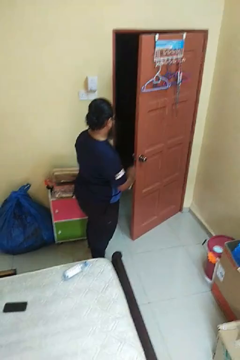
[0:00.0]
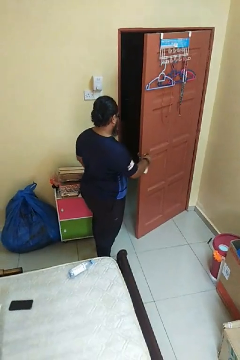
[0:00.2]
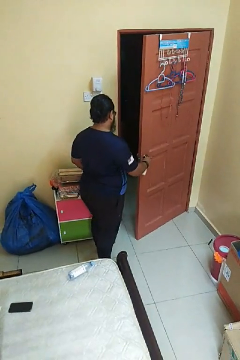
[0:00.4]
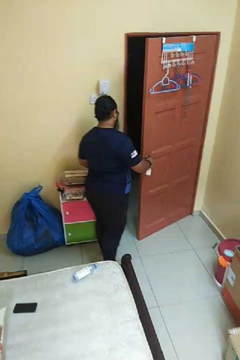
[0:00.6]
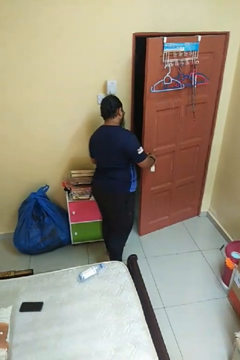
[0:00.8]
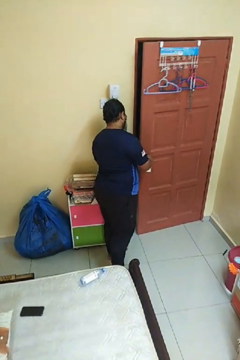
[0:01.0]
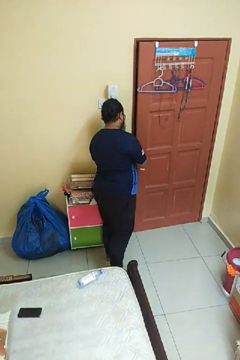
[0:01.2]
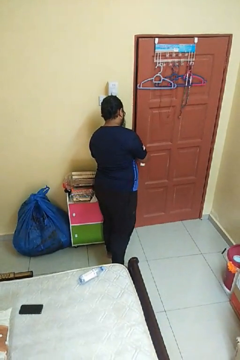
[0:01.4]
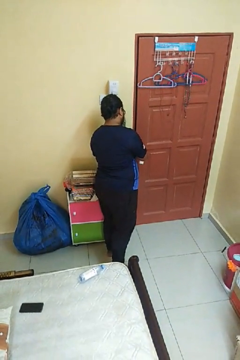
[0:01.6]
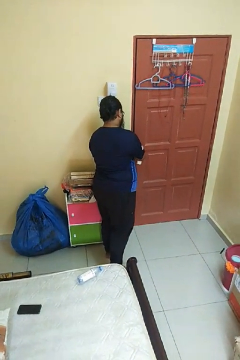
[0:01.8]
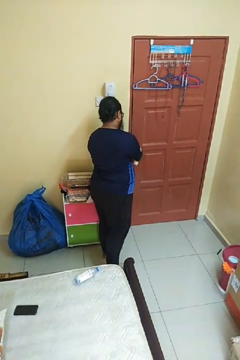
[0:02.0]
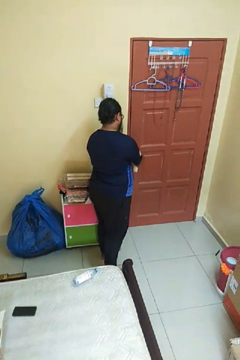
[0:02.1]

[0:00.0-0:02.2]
person closes facility door

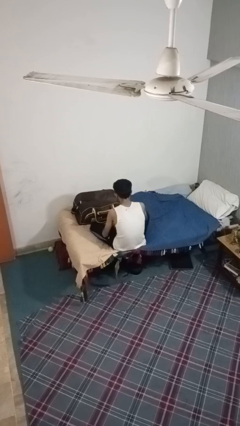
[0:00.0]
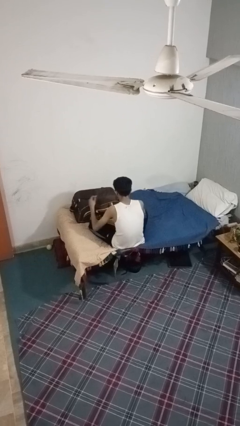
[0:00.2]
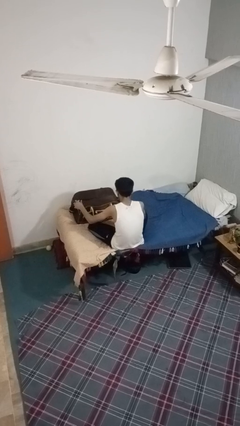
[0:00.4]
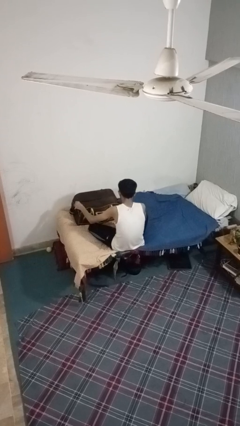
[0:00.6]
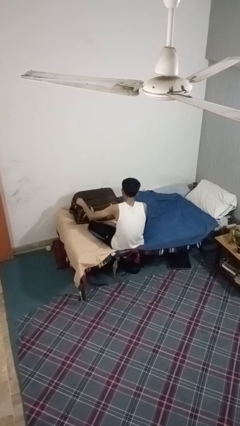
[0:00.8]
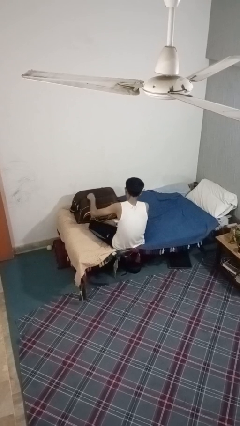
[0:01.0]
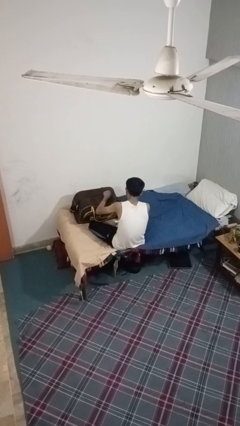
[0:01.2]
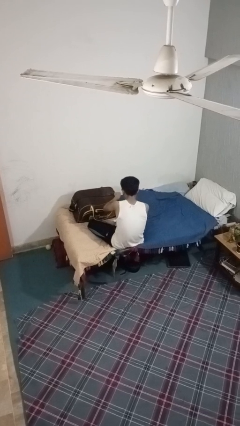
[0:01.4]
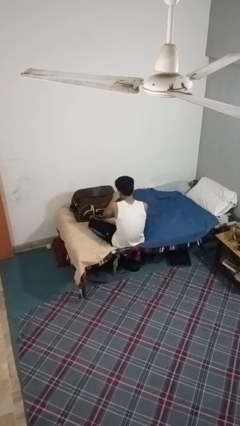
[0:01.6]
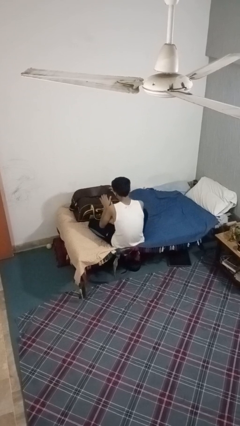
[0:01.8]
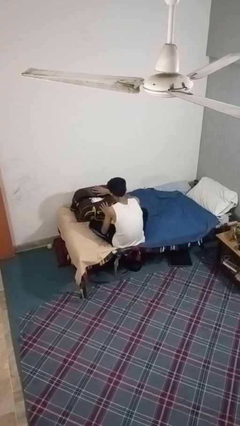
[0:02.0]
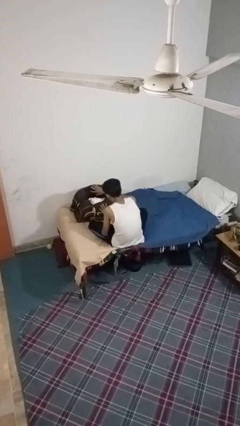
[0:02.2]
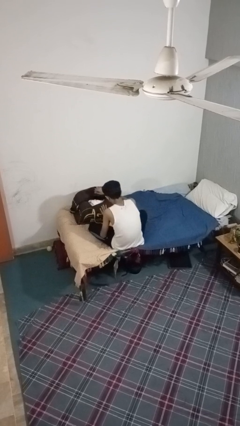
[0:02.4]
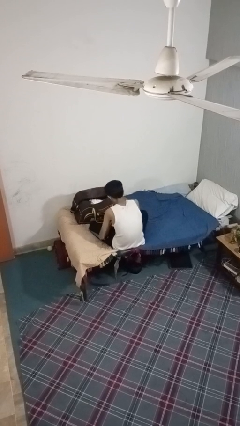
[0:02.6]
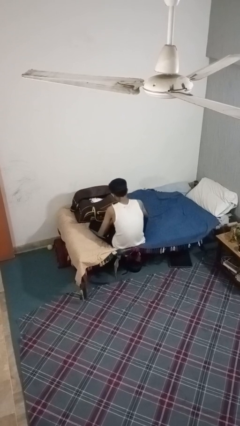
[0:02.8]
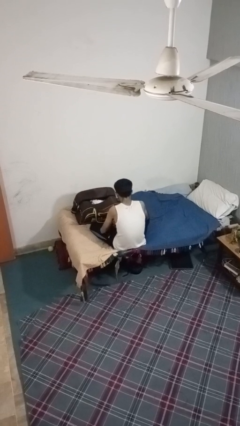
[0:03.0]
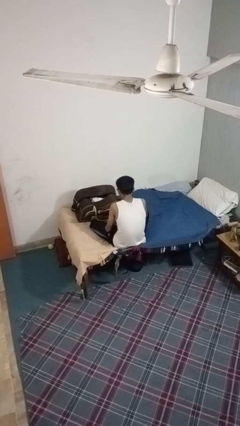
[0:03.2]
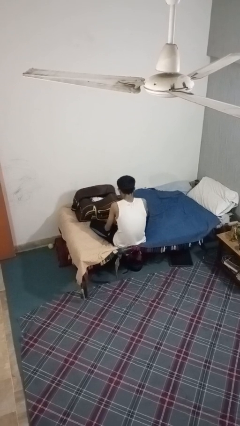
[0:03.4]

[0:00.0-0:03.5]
person opens suitcase

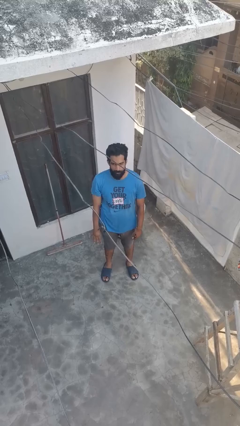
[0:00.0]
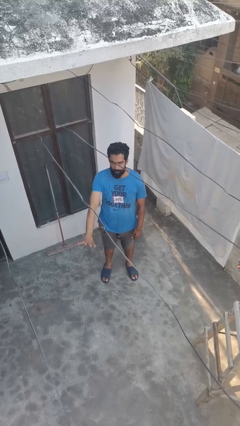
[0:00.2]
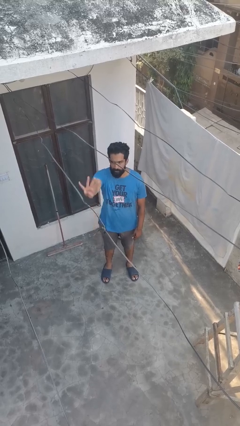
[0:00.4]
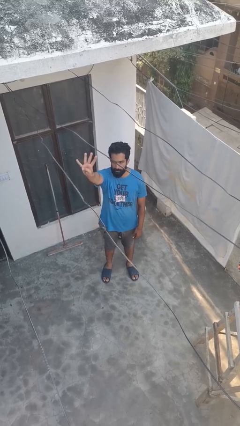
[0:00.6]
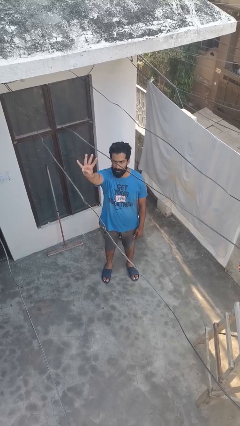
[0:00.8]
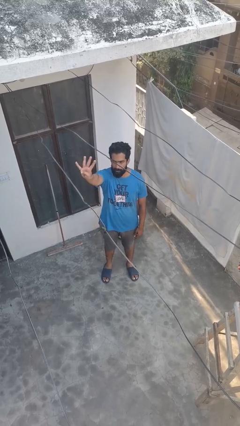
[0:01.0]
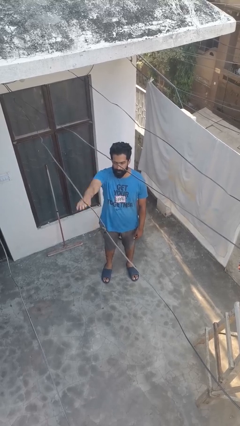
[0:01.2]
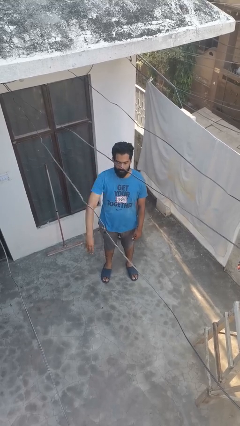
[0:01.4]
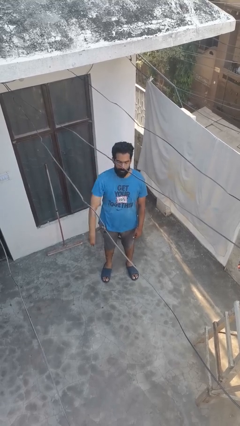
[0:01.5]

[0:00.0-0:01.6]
person gestures number four

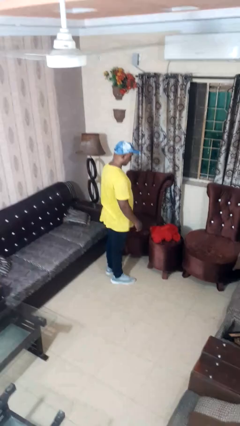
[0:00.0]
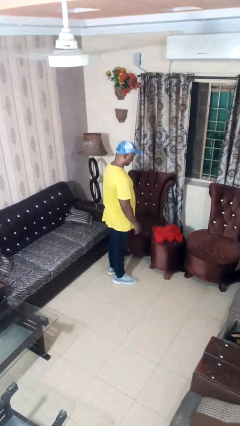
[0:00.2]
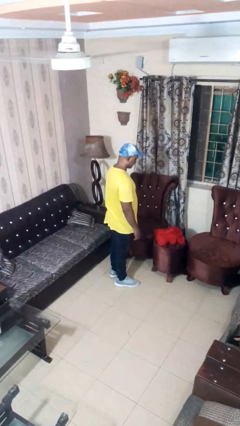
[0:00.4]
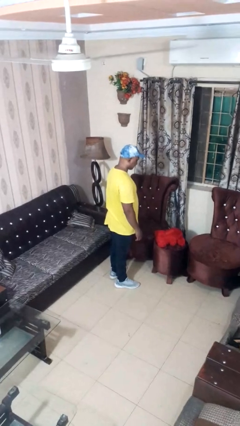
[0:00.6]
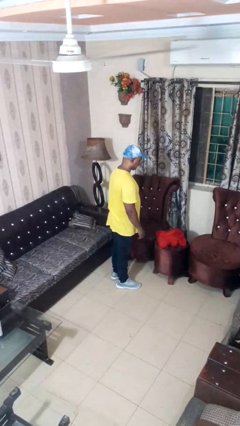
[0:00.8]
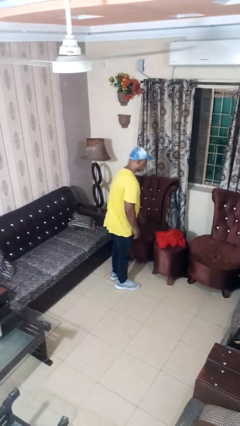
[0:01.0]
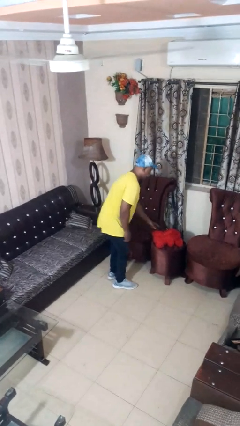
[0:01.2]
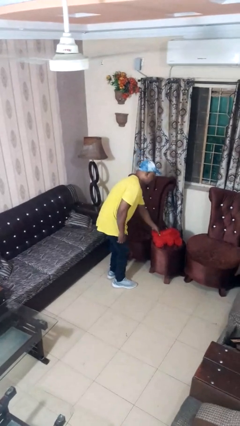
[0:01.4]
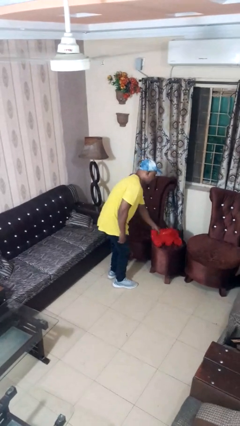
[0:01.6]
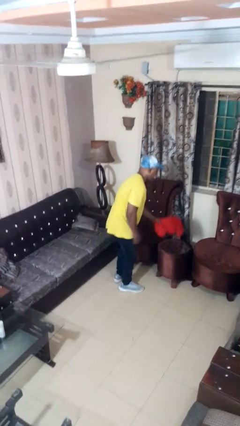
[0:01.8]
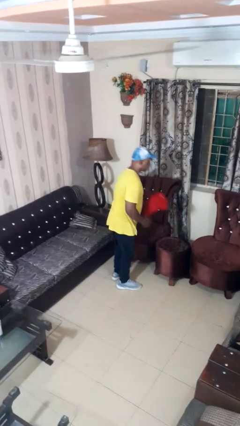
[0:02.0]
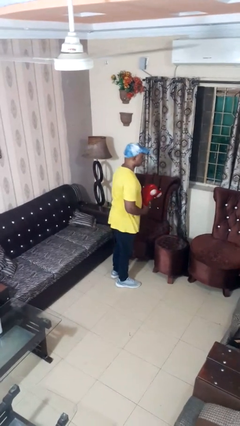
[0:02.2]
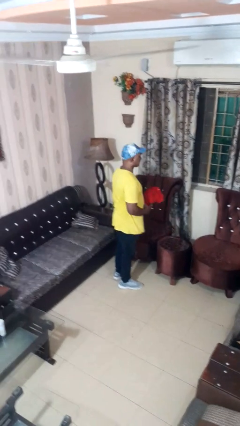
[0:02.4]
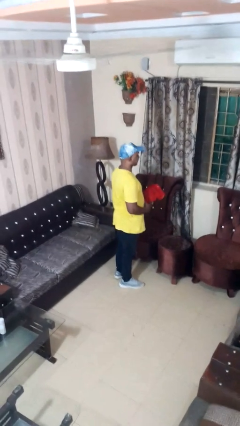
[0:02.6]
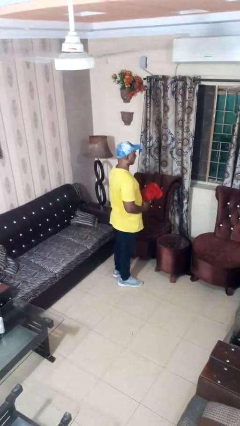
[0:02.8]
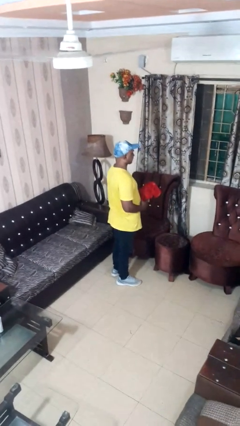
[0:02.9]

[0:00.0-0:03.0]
person picks up object from table

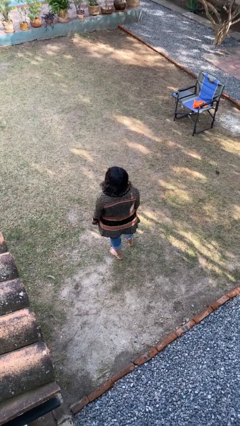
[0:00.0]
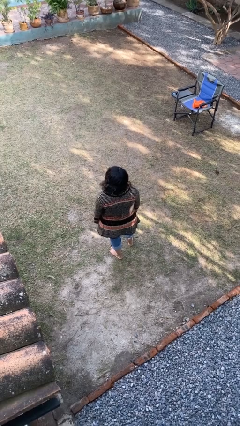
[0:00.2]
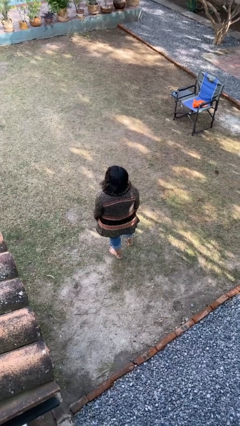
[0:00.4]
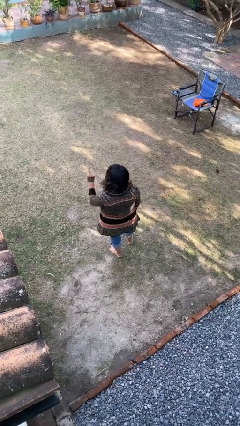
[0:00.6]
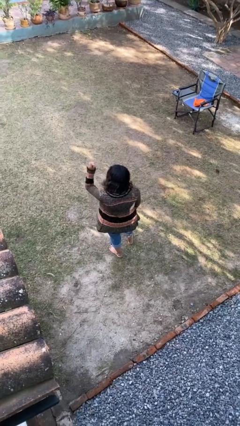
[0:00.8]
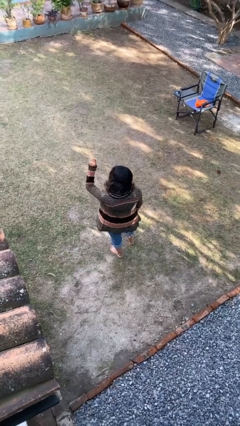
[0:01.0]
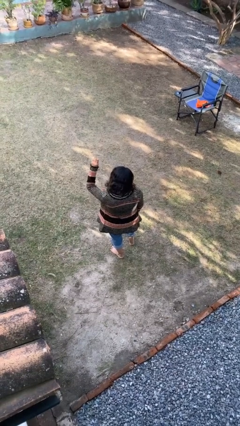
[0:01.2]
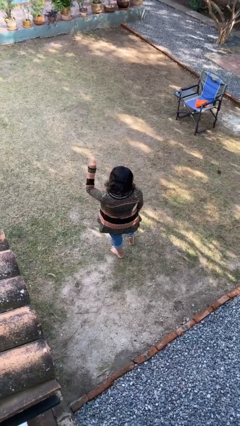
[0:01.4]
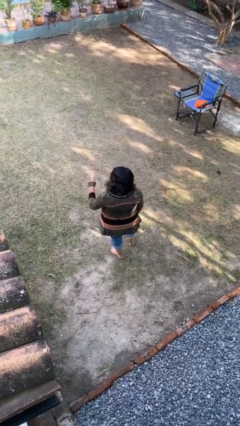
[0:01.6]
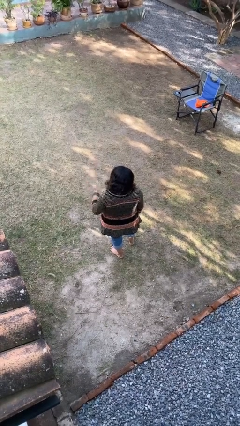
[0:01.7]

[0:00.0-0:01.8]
person gestures number one

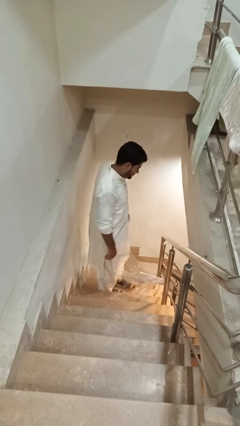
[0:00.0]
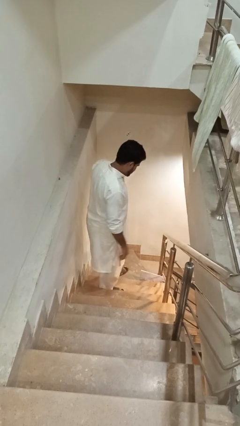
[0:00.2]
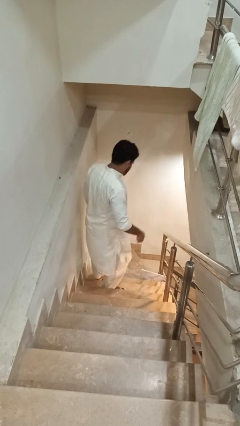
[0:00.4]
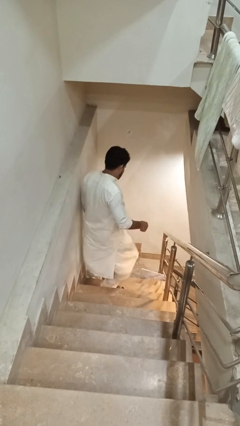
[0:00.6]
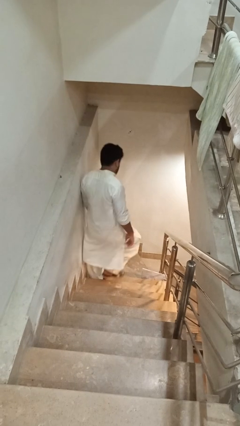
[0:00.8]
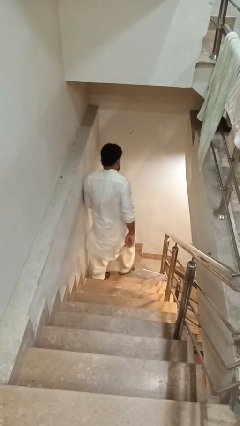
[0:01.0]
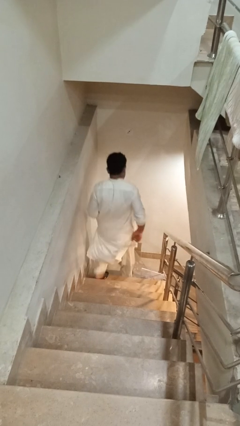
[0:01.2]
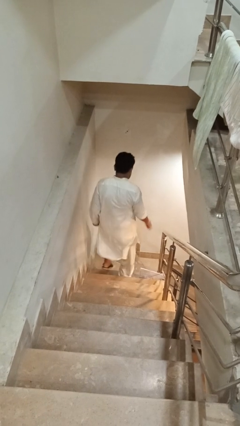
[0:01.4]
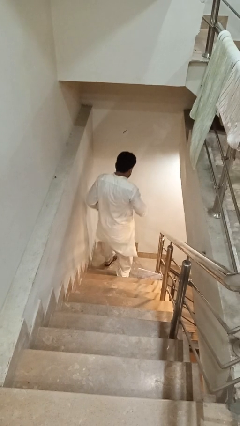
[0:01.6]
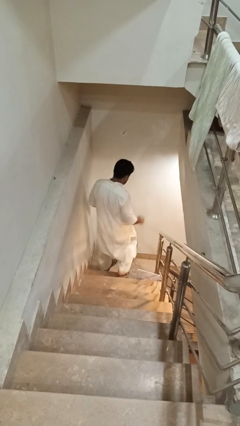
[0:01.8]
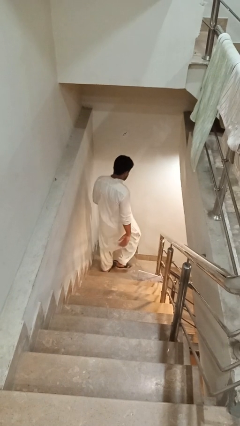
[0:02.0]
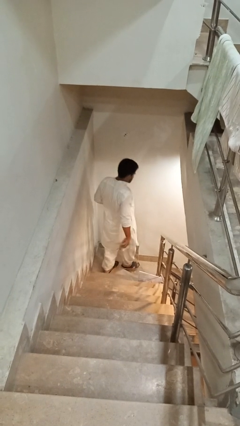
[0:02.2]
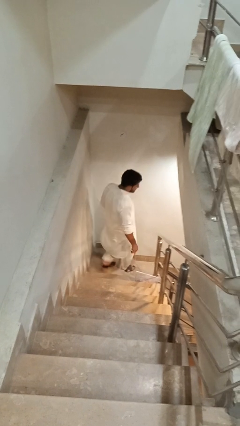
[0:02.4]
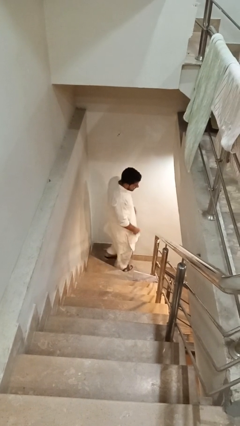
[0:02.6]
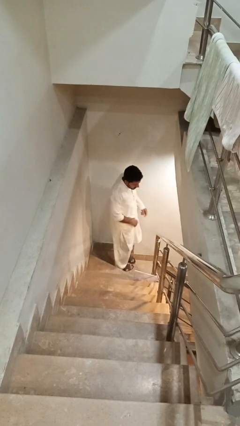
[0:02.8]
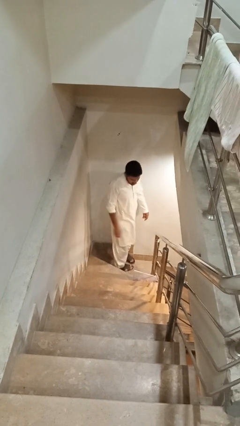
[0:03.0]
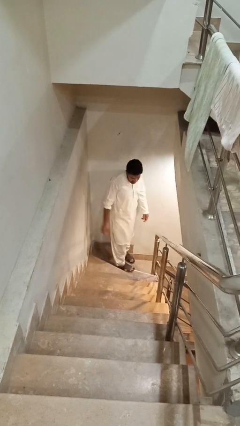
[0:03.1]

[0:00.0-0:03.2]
person climbs down stairs

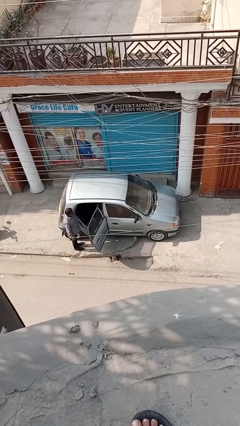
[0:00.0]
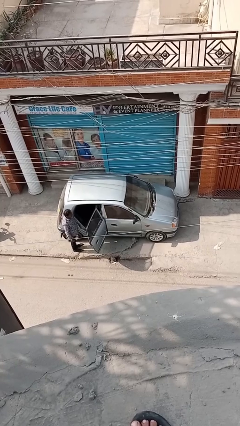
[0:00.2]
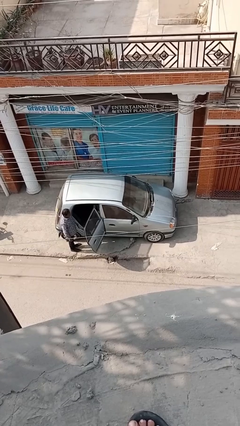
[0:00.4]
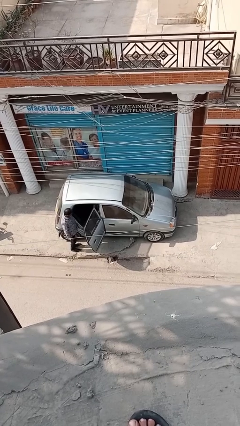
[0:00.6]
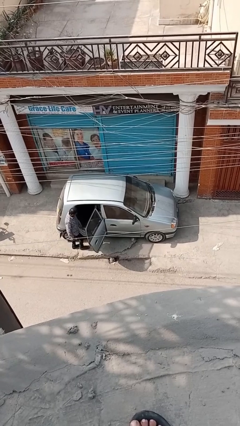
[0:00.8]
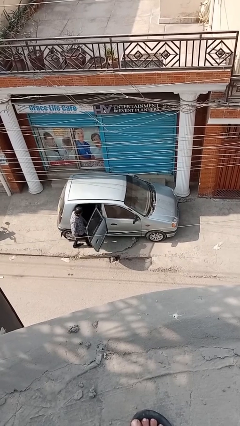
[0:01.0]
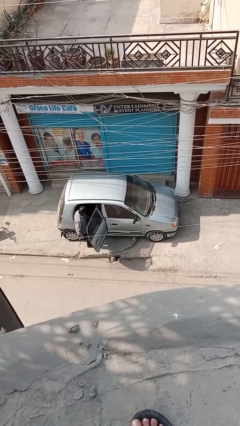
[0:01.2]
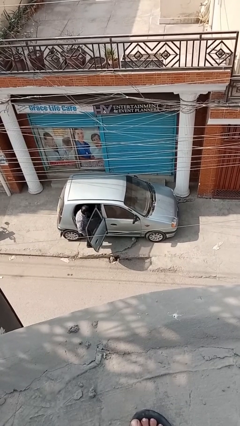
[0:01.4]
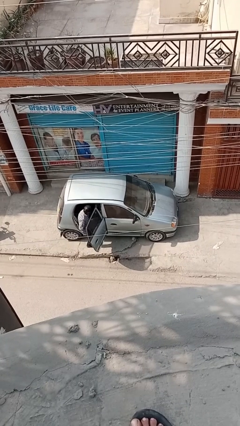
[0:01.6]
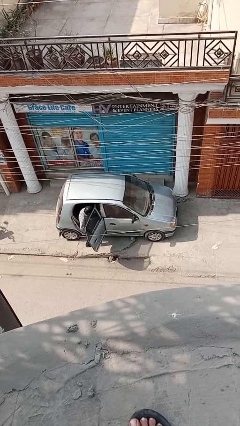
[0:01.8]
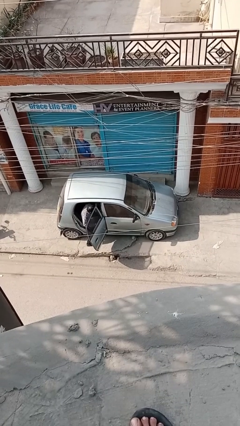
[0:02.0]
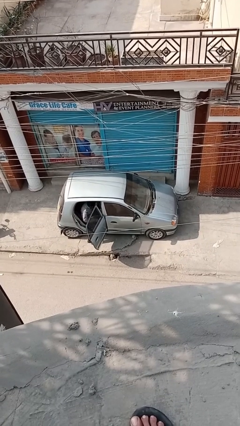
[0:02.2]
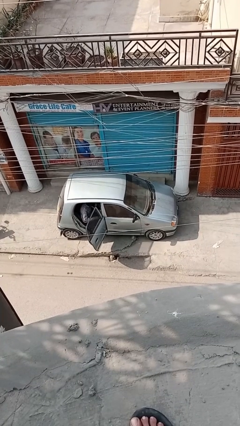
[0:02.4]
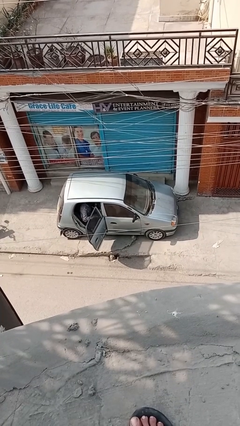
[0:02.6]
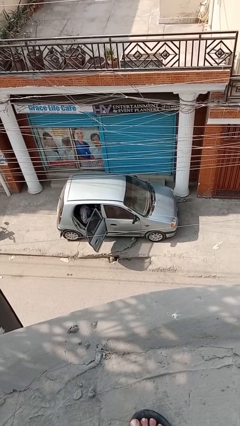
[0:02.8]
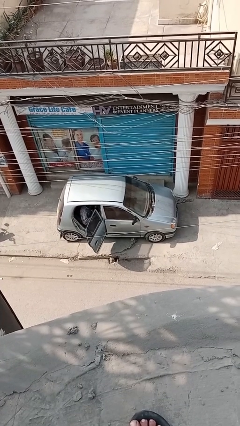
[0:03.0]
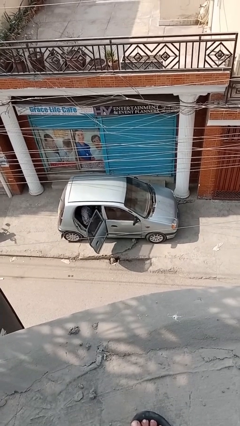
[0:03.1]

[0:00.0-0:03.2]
person enters car
